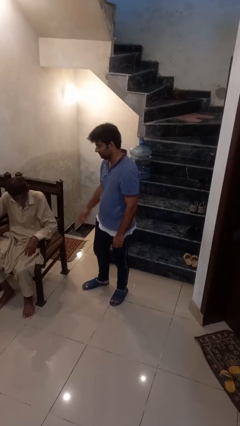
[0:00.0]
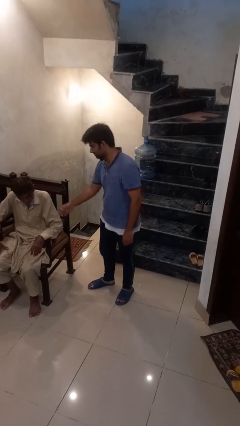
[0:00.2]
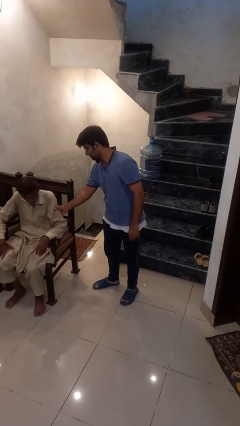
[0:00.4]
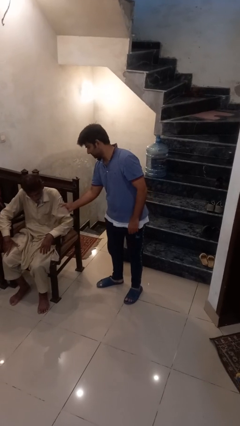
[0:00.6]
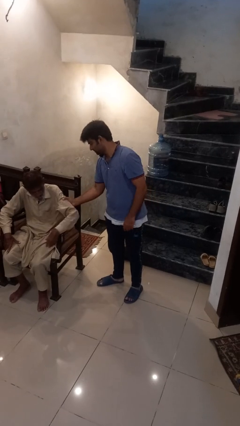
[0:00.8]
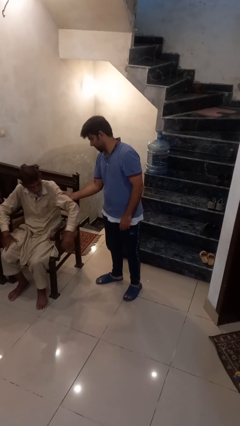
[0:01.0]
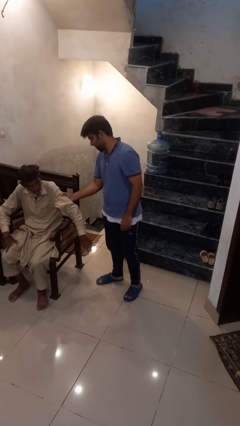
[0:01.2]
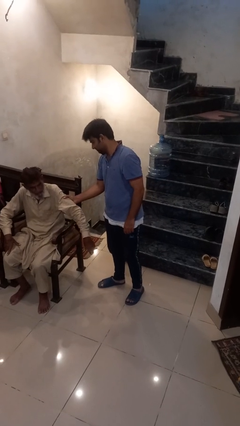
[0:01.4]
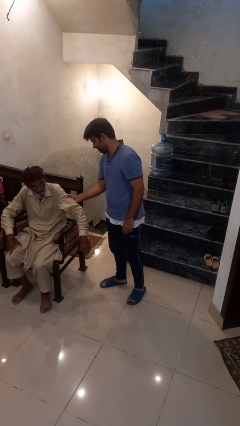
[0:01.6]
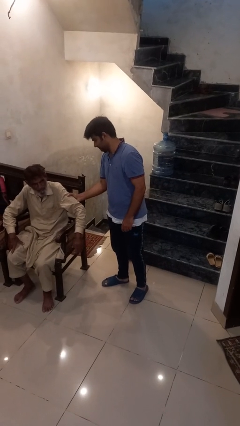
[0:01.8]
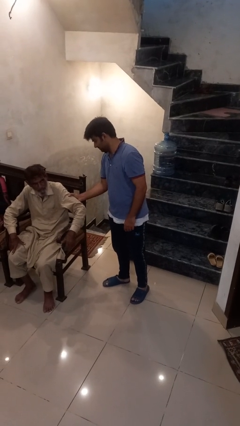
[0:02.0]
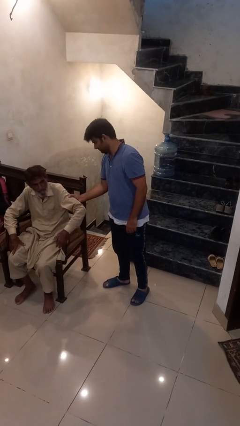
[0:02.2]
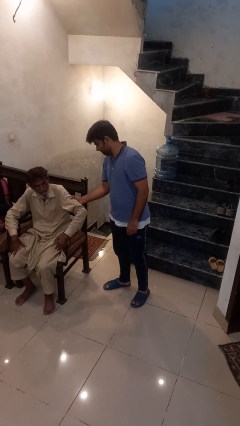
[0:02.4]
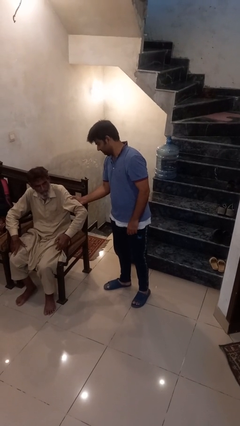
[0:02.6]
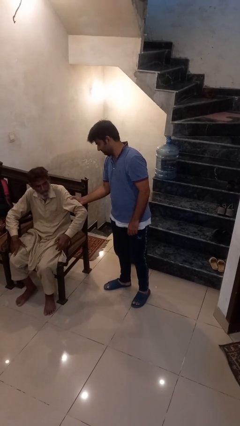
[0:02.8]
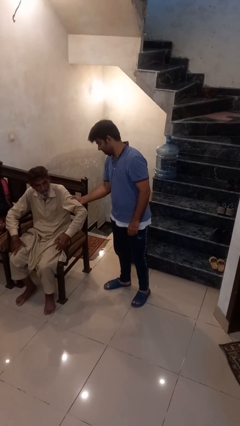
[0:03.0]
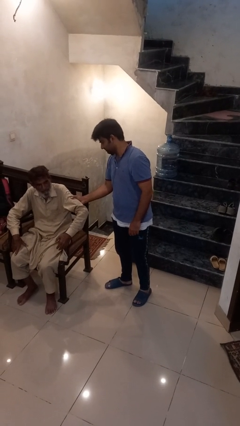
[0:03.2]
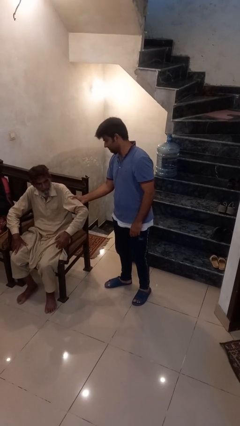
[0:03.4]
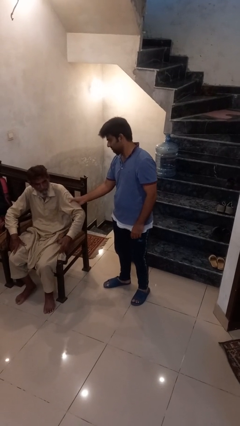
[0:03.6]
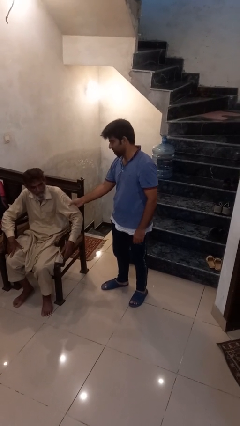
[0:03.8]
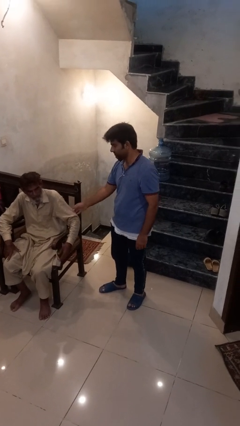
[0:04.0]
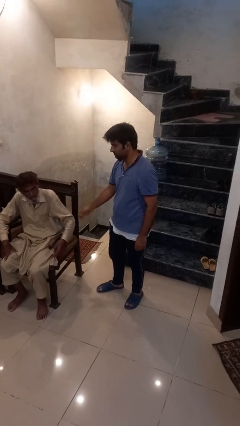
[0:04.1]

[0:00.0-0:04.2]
person grabs person by bicep

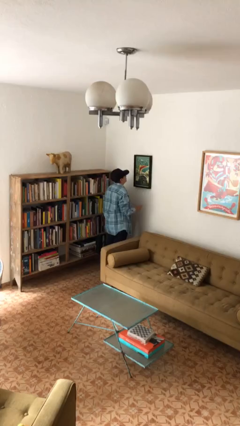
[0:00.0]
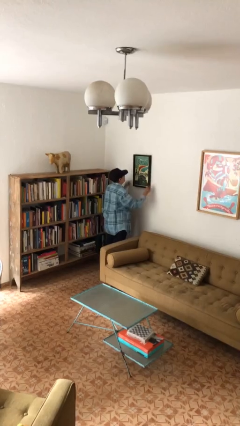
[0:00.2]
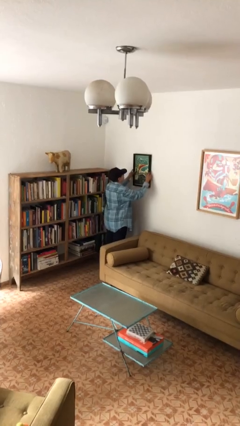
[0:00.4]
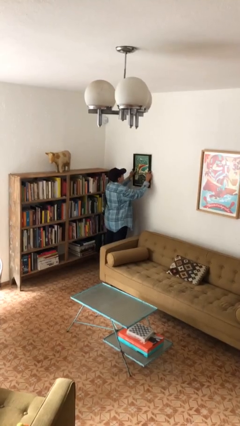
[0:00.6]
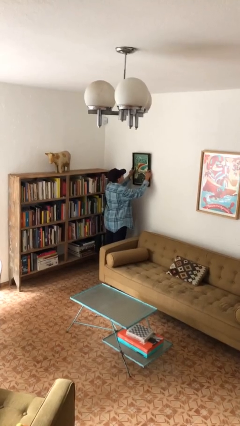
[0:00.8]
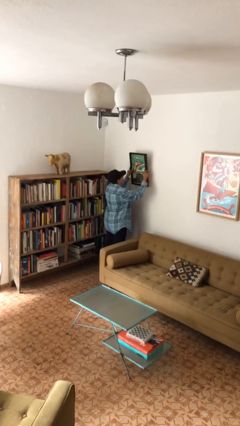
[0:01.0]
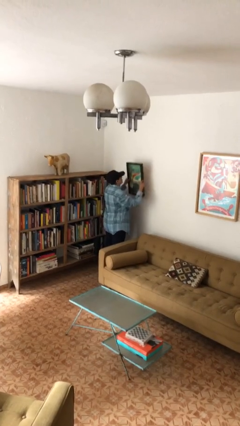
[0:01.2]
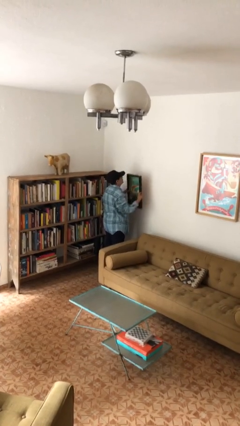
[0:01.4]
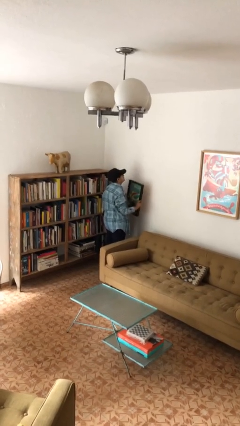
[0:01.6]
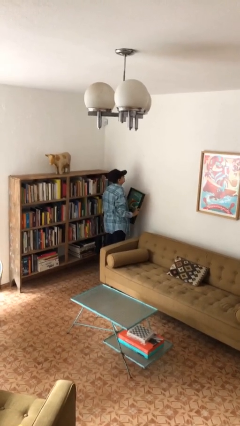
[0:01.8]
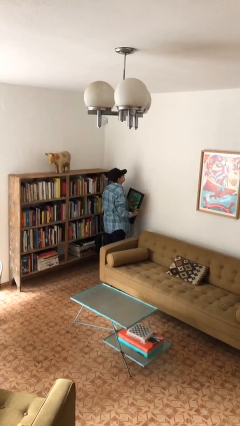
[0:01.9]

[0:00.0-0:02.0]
person takes down picture frame

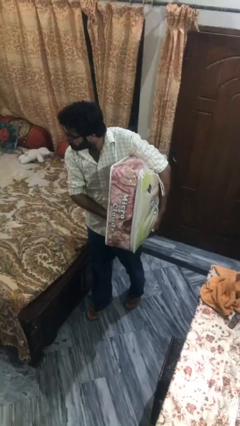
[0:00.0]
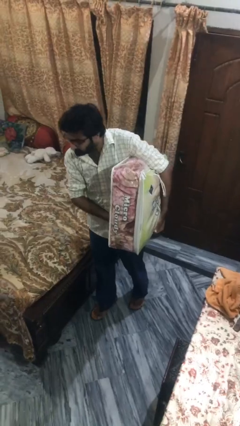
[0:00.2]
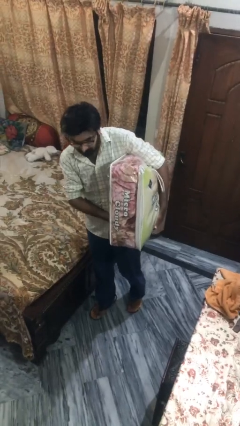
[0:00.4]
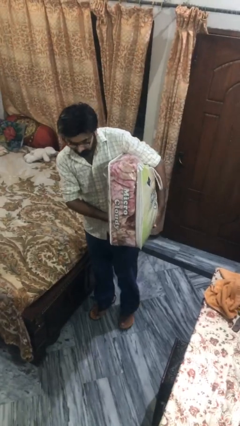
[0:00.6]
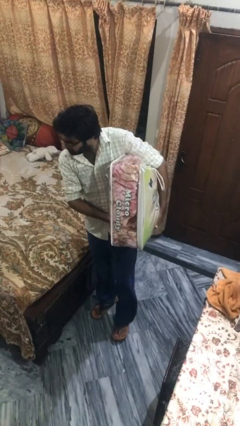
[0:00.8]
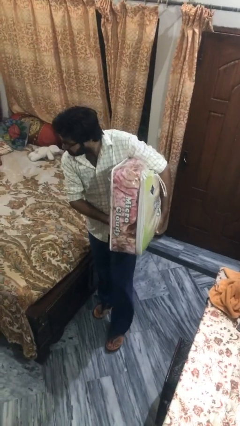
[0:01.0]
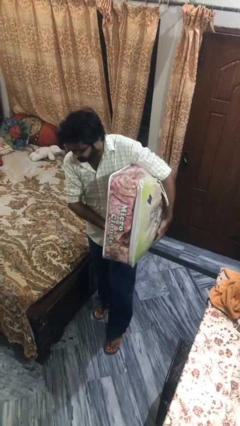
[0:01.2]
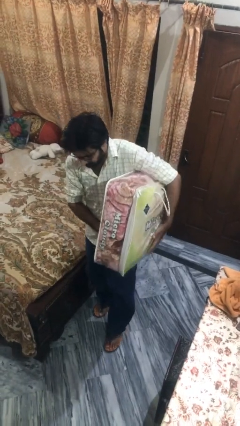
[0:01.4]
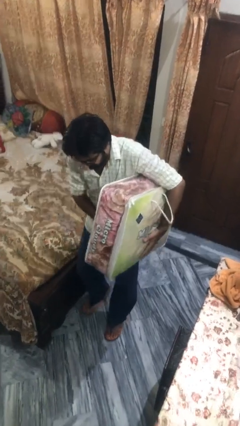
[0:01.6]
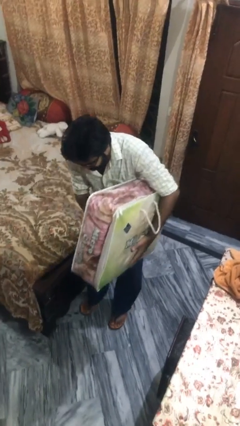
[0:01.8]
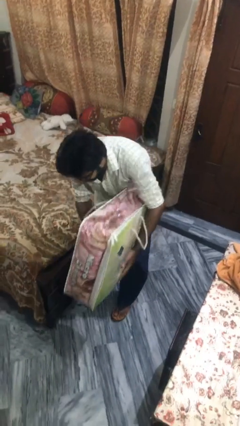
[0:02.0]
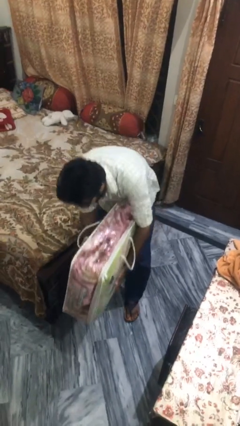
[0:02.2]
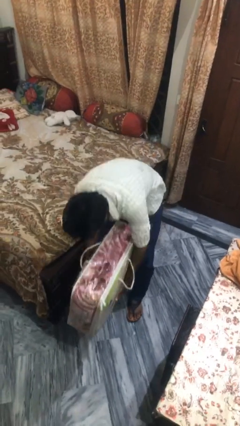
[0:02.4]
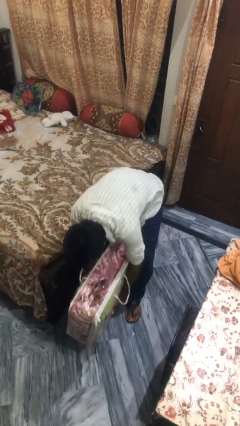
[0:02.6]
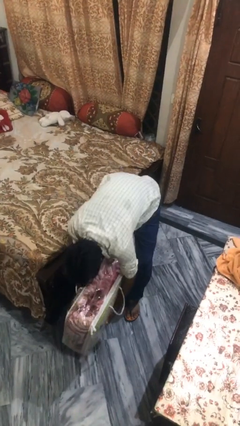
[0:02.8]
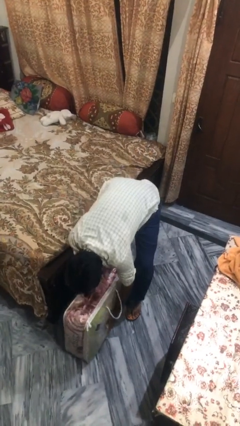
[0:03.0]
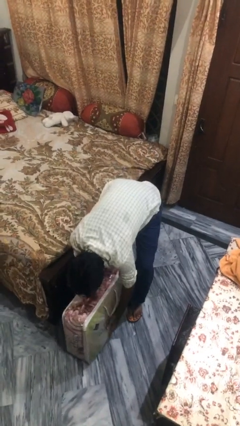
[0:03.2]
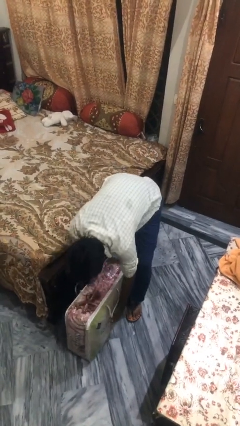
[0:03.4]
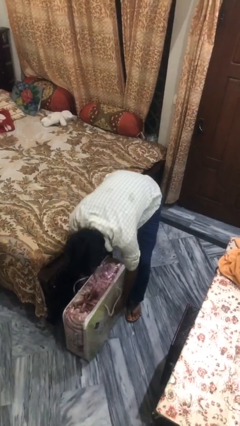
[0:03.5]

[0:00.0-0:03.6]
person puts down object on floor

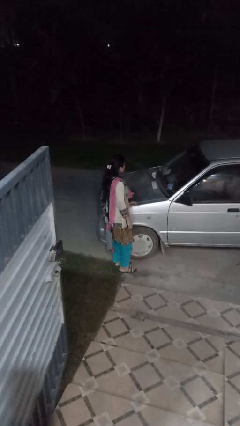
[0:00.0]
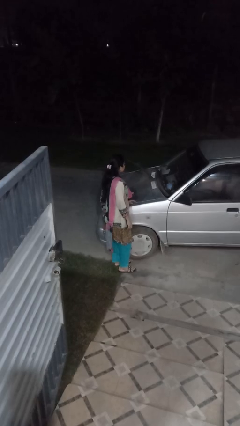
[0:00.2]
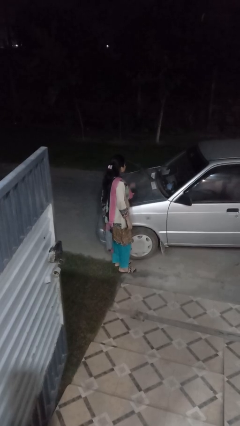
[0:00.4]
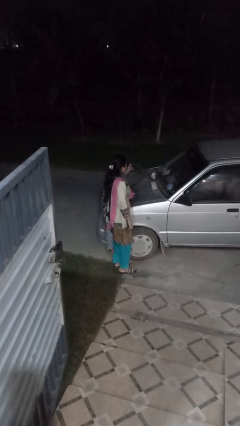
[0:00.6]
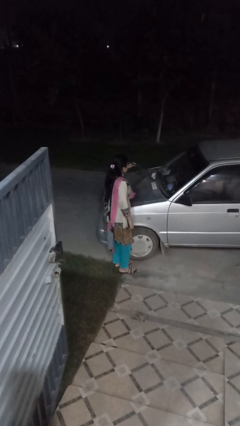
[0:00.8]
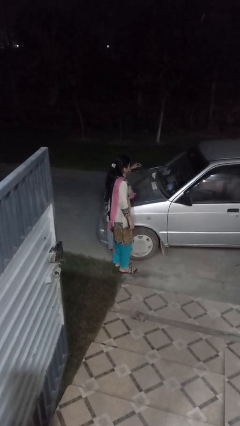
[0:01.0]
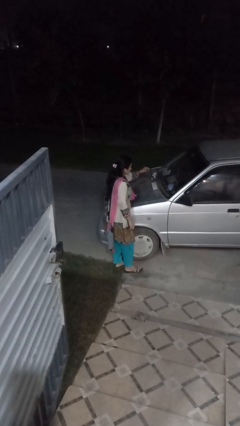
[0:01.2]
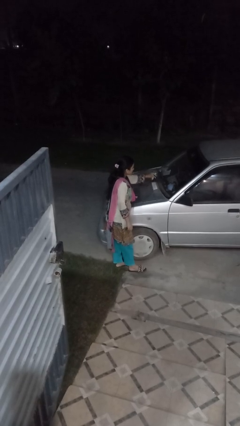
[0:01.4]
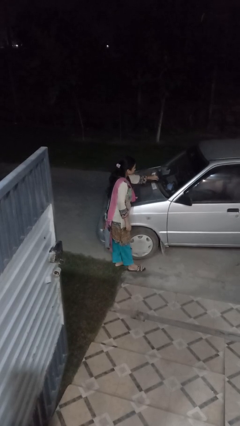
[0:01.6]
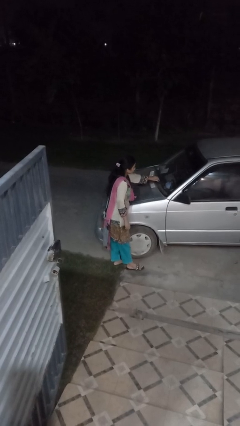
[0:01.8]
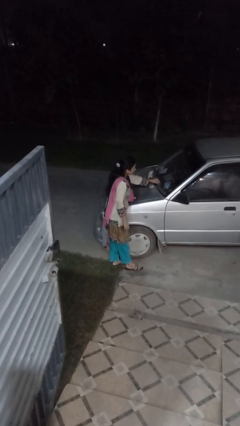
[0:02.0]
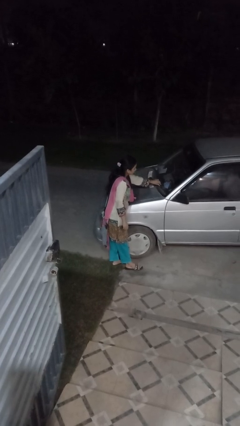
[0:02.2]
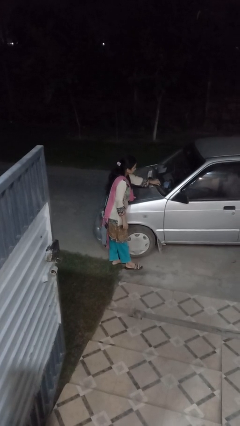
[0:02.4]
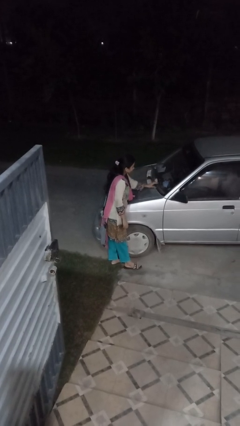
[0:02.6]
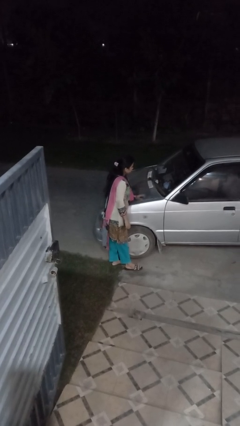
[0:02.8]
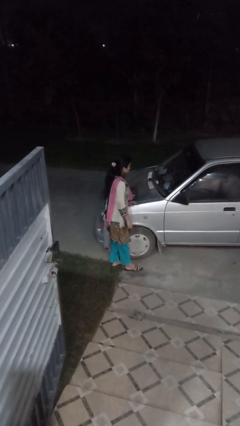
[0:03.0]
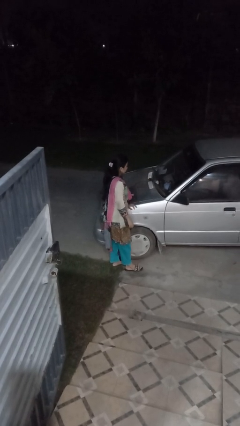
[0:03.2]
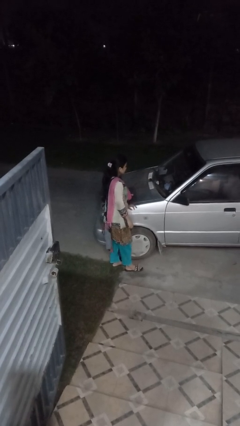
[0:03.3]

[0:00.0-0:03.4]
person flips down car wipers

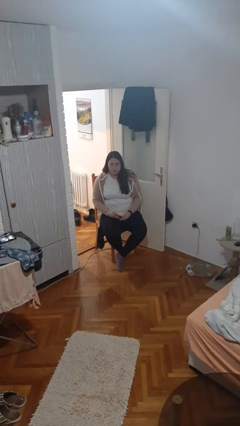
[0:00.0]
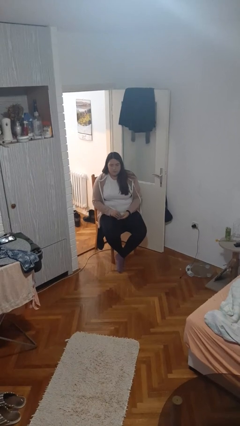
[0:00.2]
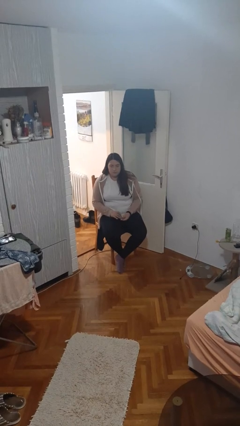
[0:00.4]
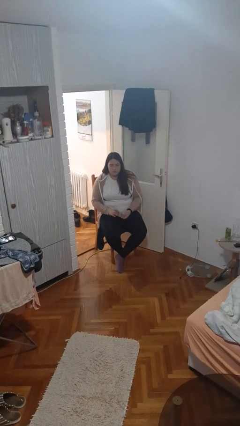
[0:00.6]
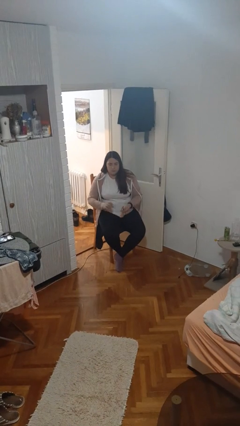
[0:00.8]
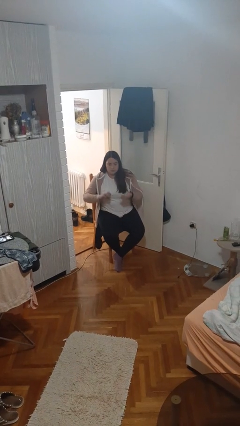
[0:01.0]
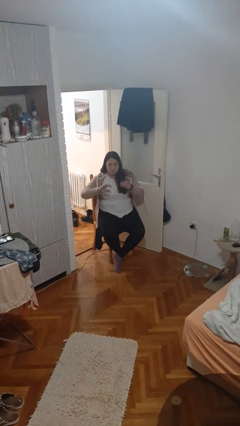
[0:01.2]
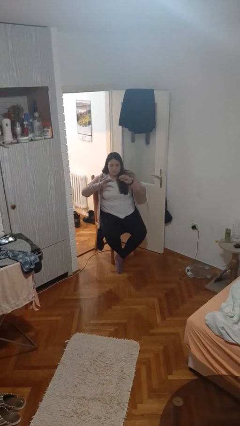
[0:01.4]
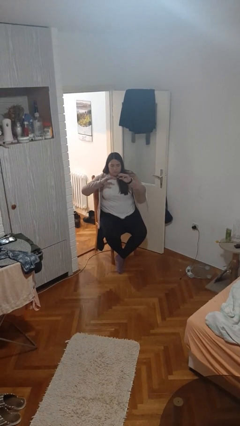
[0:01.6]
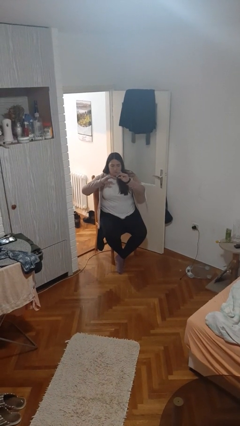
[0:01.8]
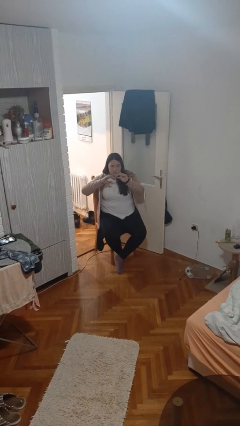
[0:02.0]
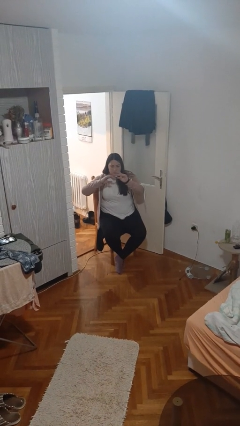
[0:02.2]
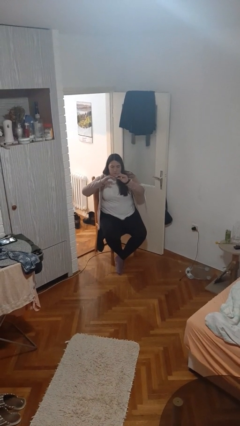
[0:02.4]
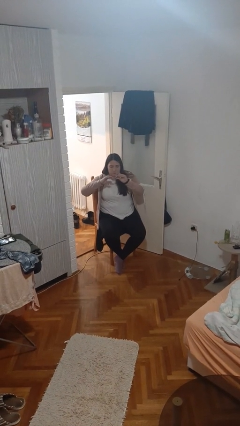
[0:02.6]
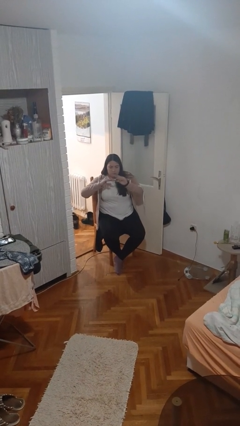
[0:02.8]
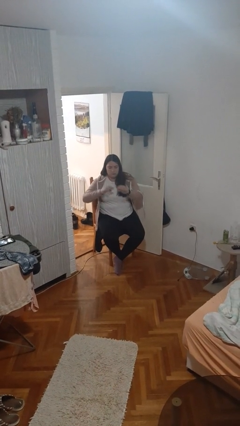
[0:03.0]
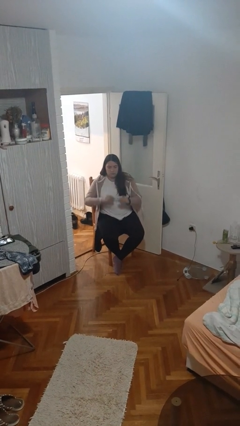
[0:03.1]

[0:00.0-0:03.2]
person clips fingernails

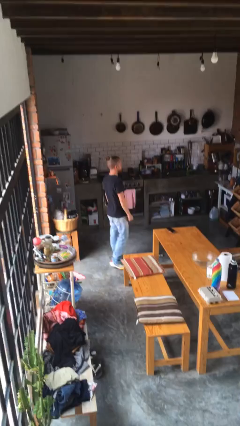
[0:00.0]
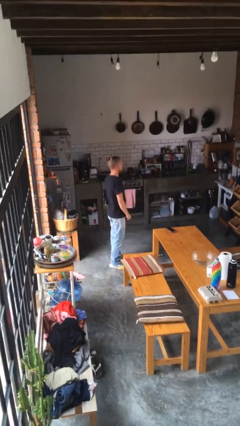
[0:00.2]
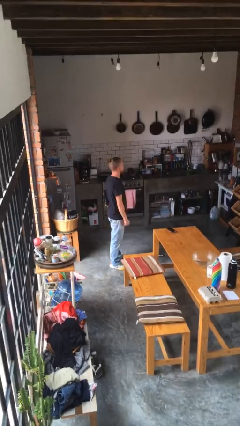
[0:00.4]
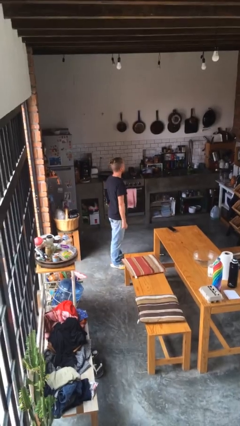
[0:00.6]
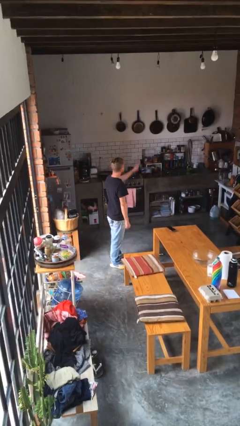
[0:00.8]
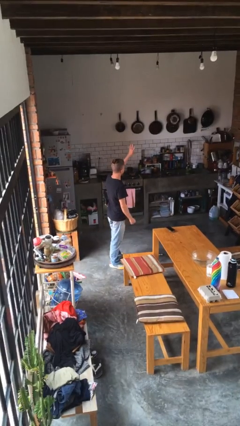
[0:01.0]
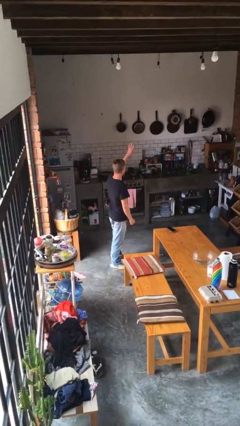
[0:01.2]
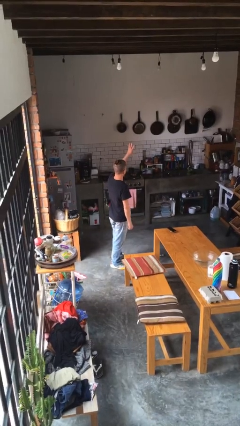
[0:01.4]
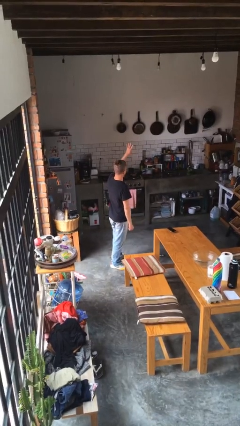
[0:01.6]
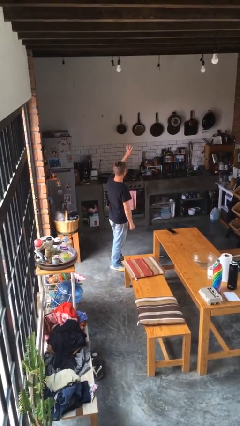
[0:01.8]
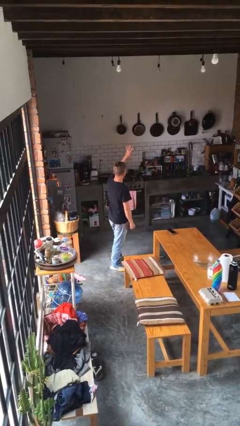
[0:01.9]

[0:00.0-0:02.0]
person gestures number four
